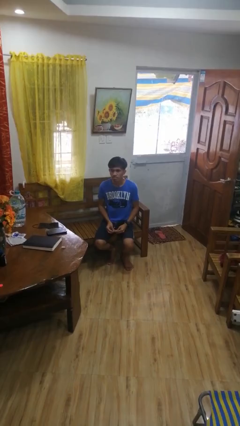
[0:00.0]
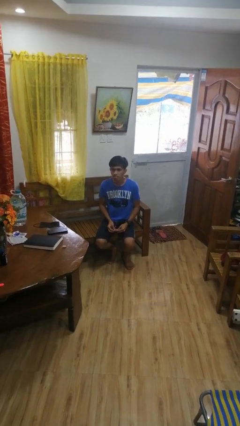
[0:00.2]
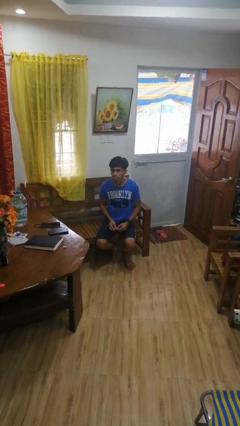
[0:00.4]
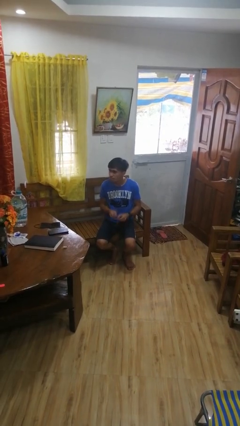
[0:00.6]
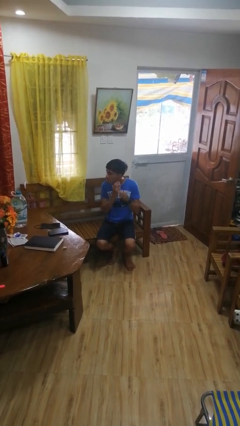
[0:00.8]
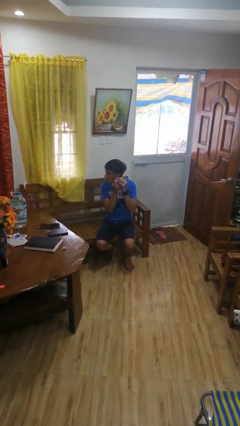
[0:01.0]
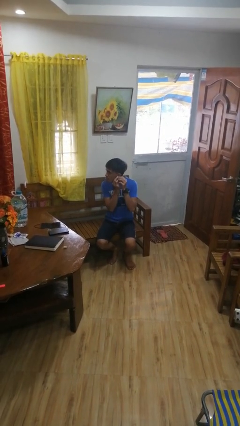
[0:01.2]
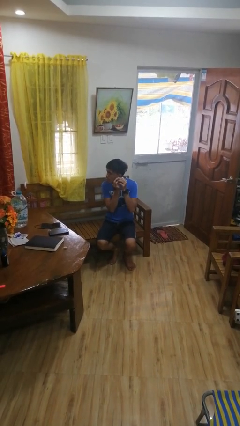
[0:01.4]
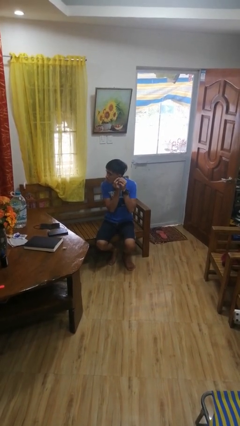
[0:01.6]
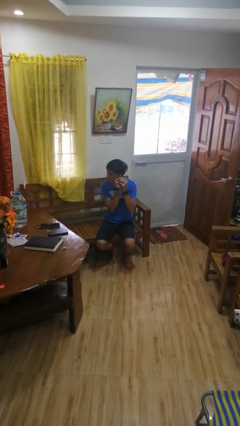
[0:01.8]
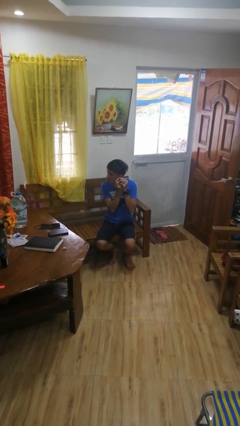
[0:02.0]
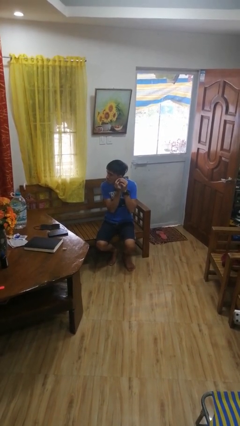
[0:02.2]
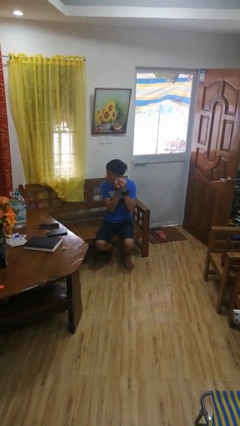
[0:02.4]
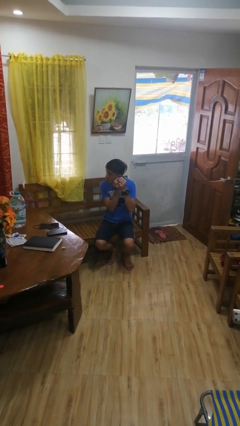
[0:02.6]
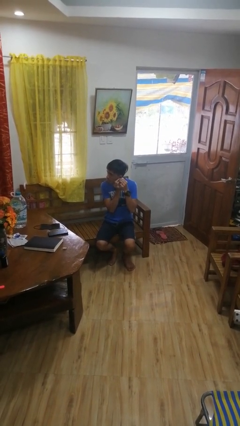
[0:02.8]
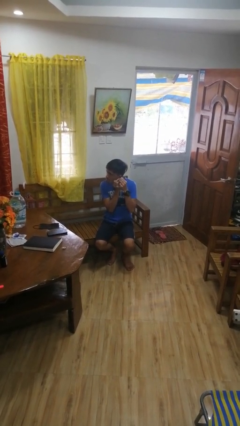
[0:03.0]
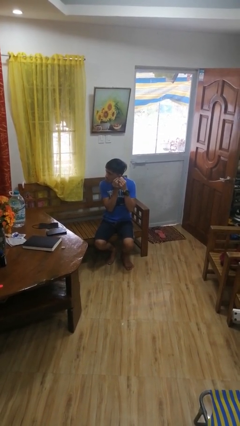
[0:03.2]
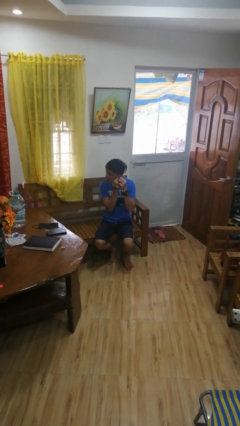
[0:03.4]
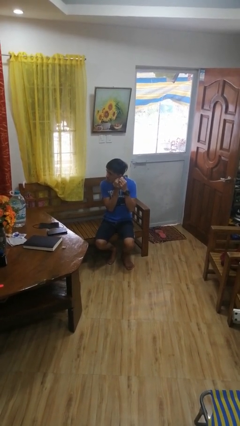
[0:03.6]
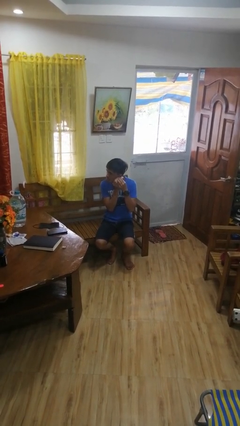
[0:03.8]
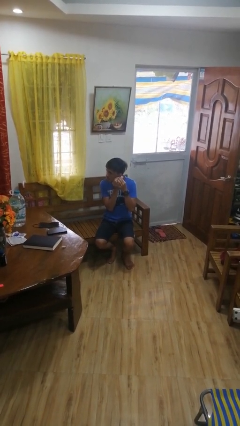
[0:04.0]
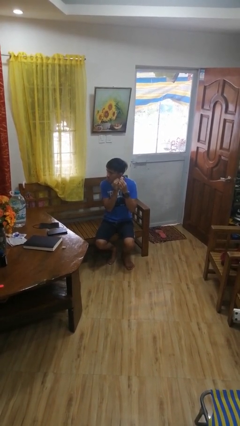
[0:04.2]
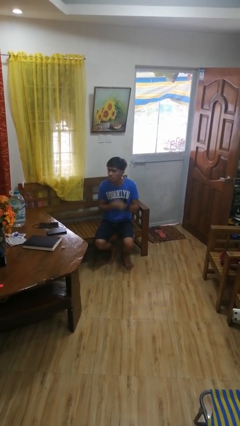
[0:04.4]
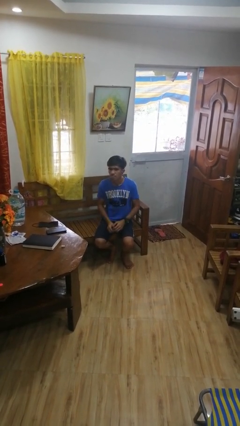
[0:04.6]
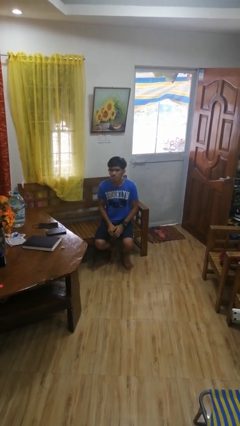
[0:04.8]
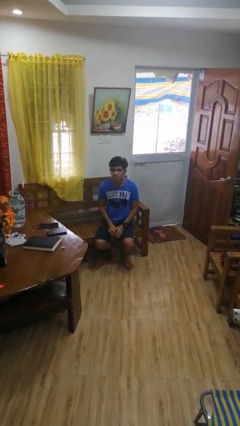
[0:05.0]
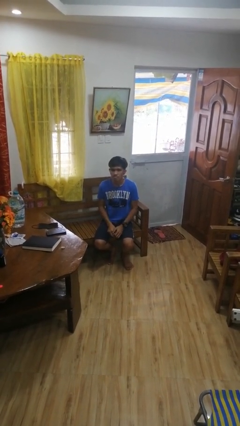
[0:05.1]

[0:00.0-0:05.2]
person puts on earrings

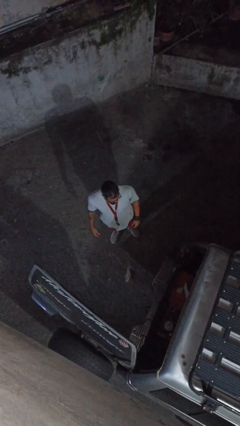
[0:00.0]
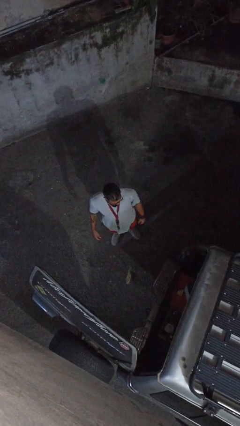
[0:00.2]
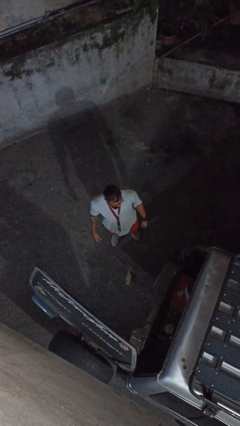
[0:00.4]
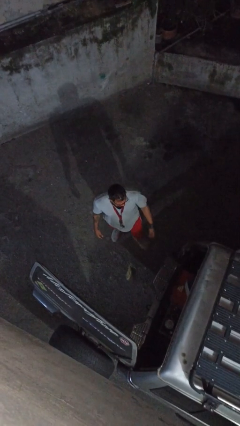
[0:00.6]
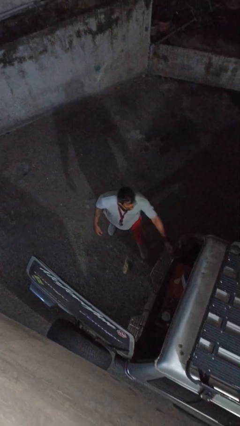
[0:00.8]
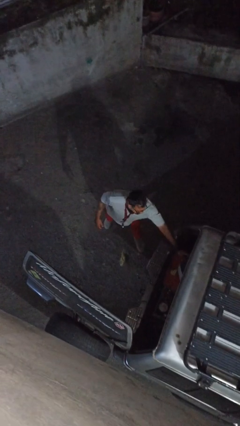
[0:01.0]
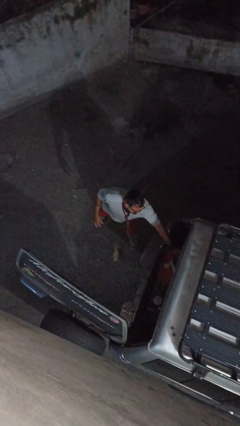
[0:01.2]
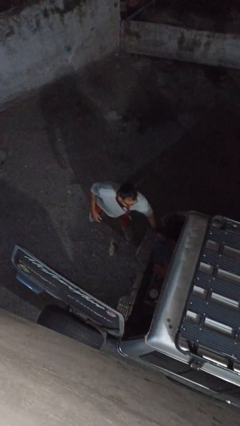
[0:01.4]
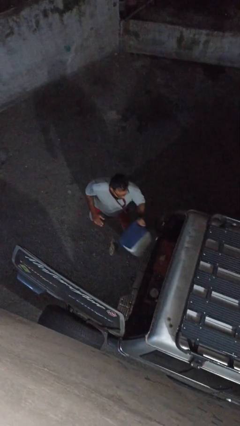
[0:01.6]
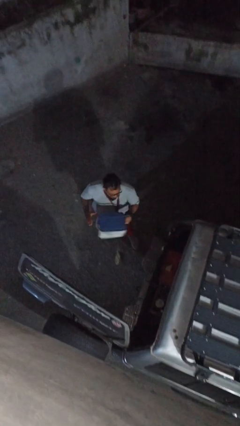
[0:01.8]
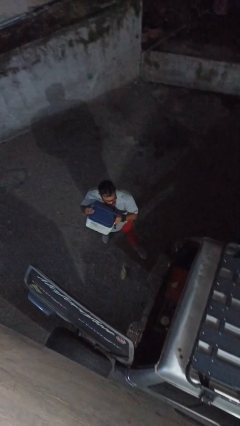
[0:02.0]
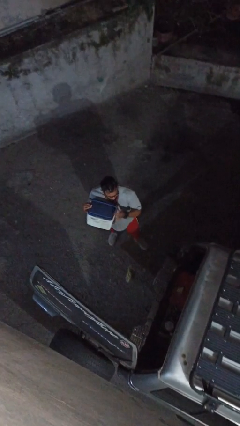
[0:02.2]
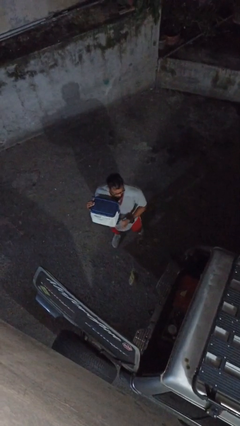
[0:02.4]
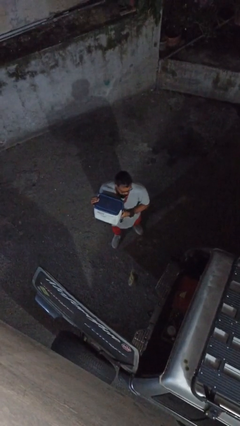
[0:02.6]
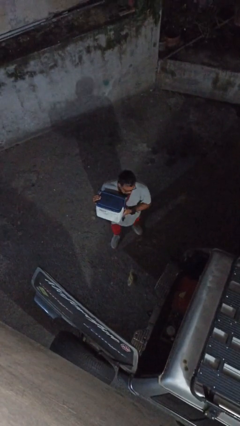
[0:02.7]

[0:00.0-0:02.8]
person unloads car

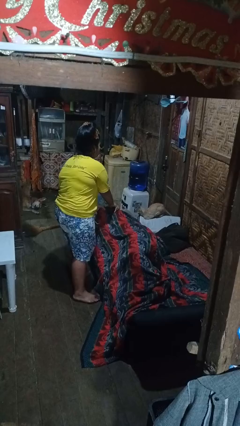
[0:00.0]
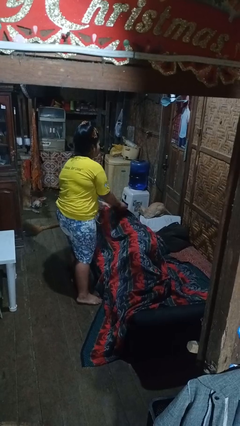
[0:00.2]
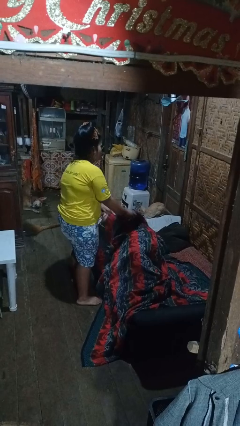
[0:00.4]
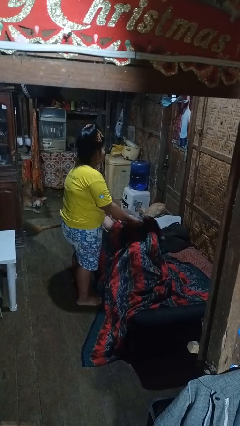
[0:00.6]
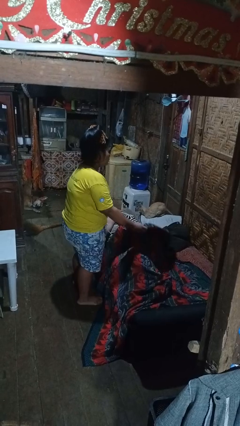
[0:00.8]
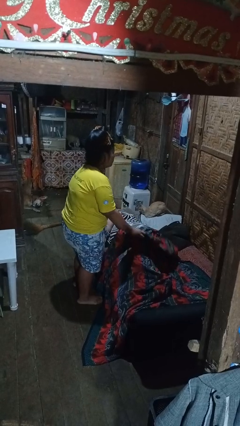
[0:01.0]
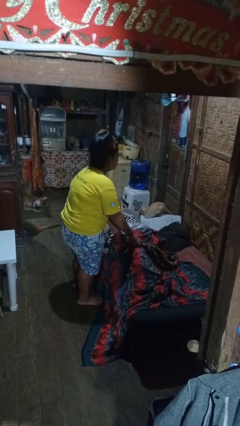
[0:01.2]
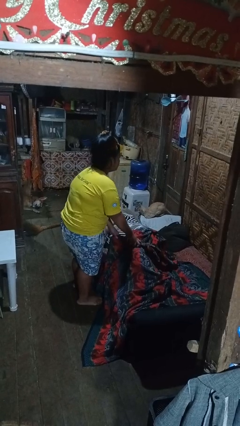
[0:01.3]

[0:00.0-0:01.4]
person uncovers friend with blanket

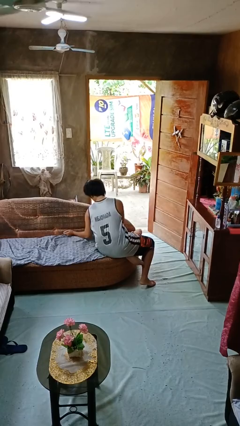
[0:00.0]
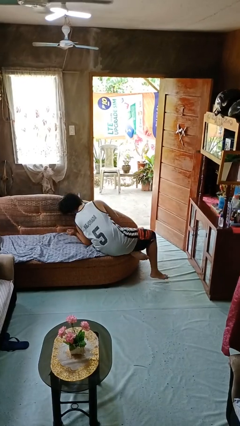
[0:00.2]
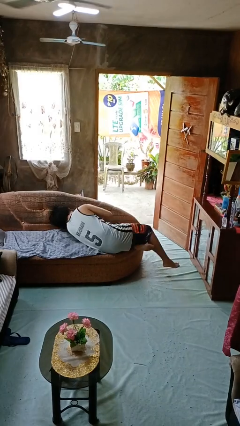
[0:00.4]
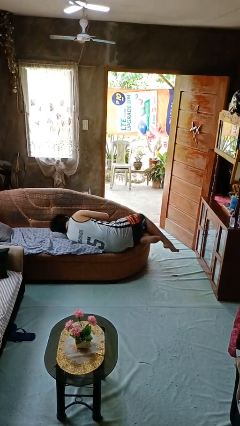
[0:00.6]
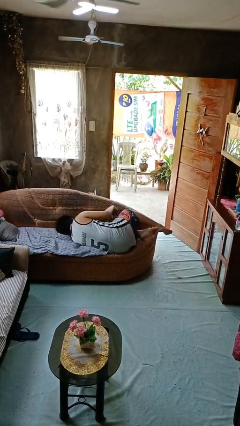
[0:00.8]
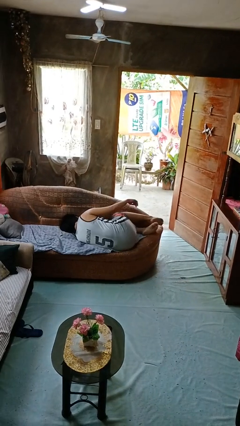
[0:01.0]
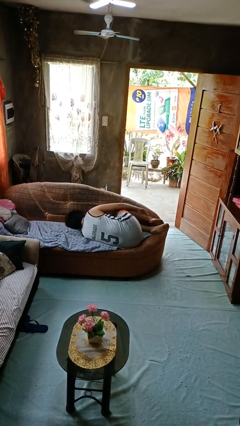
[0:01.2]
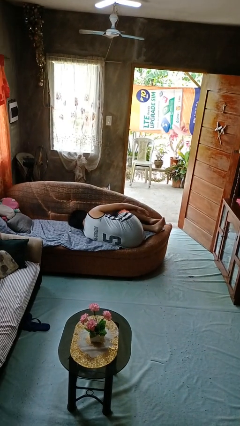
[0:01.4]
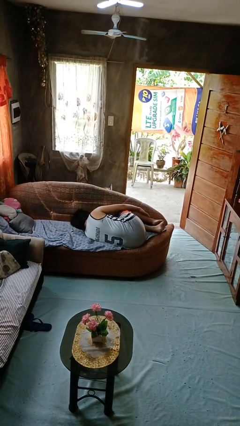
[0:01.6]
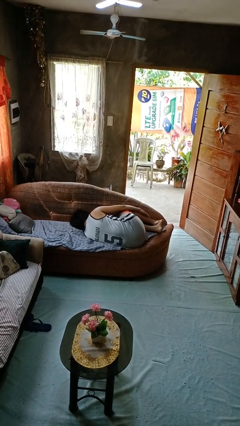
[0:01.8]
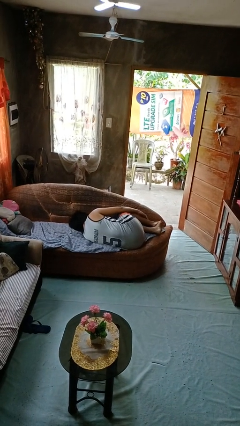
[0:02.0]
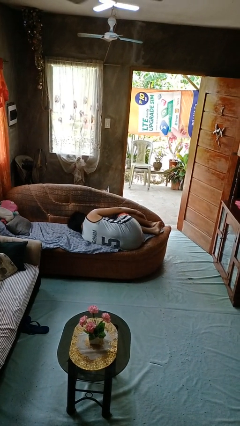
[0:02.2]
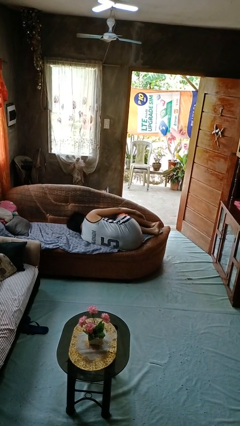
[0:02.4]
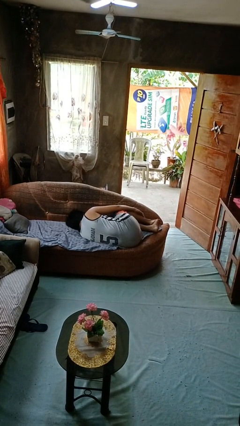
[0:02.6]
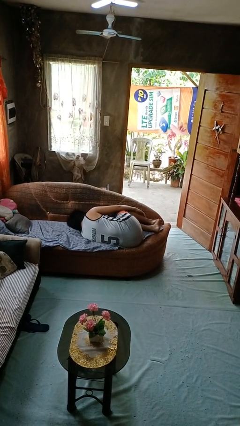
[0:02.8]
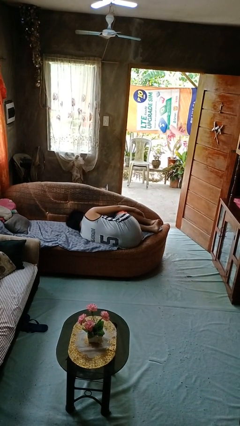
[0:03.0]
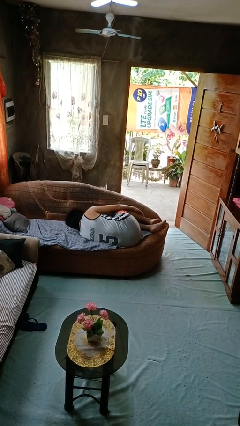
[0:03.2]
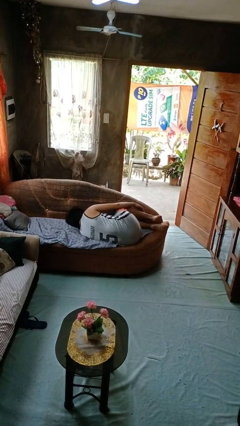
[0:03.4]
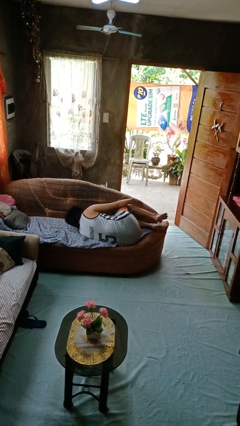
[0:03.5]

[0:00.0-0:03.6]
person lies down on couch

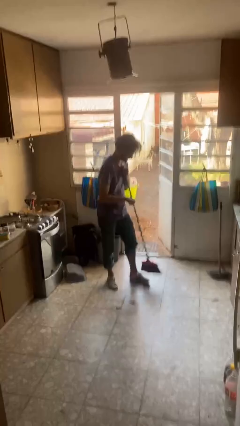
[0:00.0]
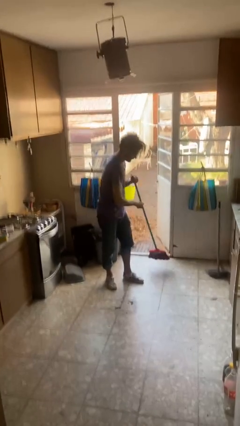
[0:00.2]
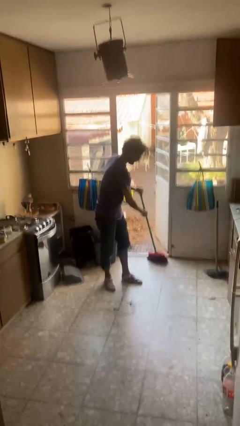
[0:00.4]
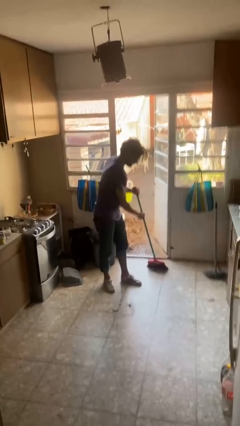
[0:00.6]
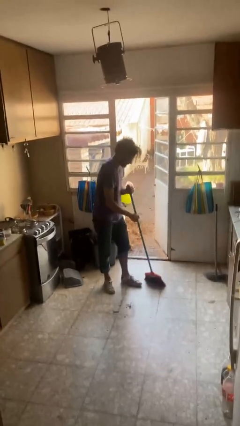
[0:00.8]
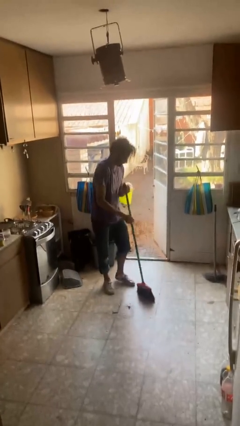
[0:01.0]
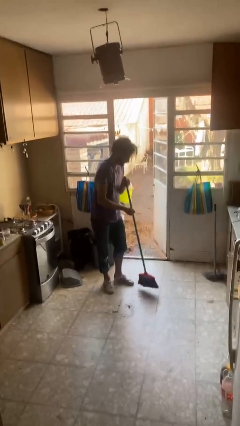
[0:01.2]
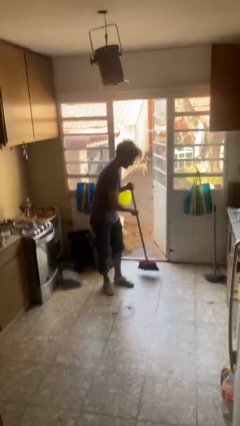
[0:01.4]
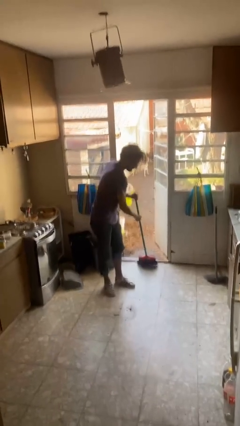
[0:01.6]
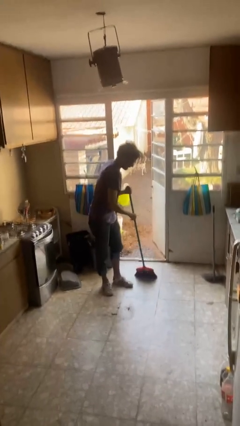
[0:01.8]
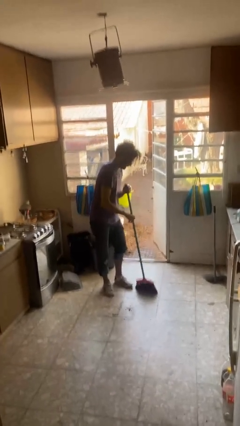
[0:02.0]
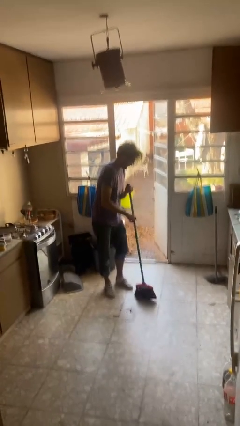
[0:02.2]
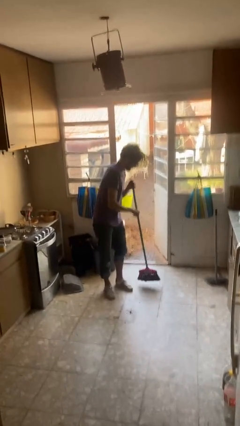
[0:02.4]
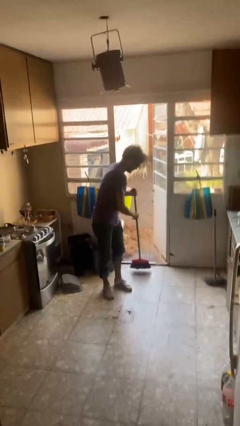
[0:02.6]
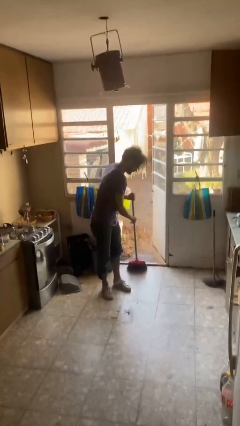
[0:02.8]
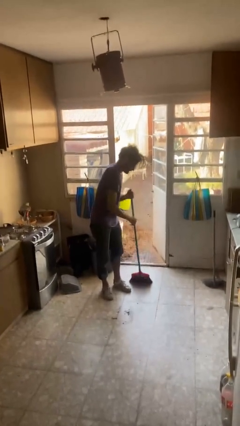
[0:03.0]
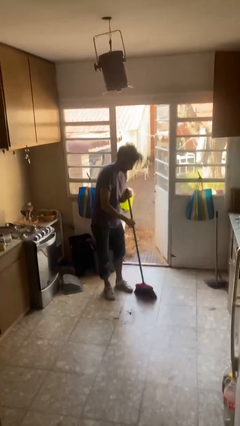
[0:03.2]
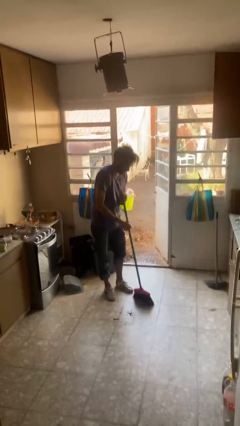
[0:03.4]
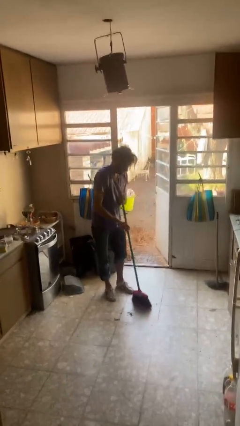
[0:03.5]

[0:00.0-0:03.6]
person sweeps floor

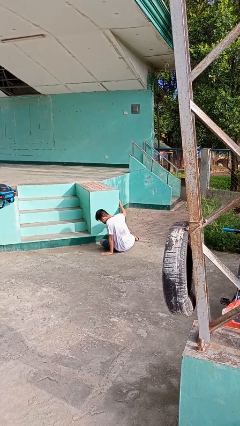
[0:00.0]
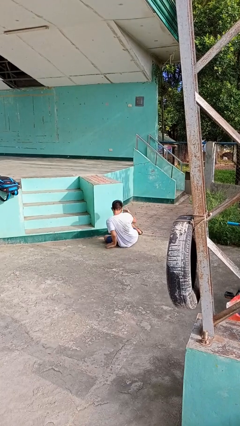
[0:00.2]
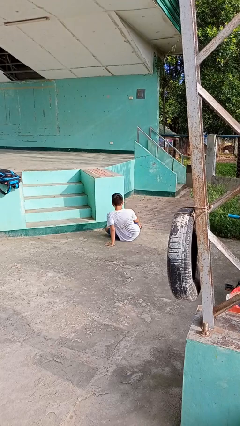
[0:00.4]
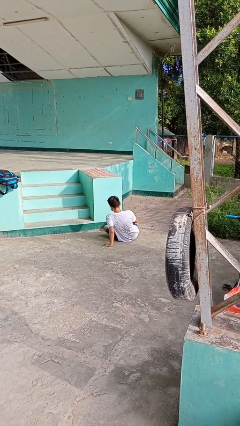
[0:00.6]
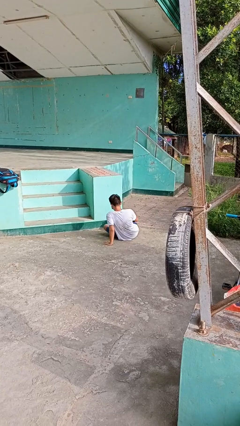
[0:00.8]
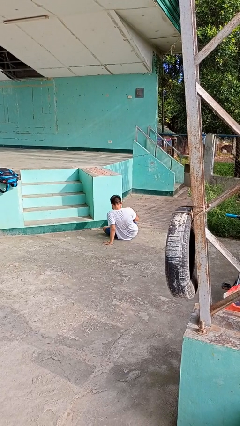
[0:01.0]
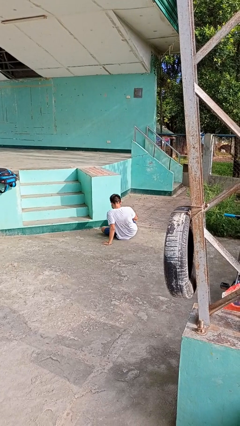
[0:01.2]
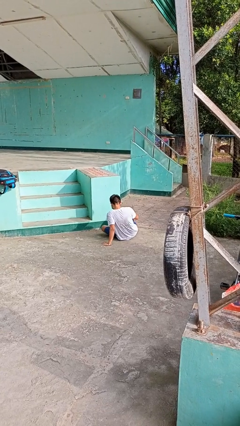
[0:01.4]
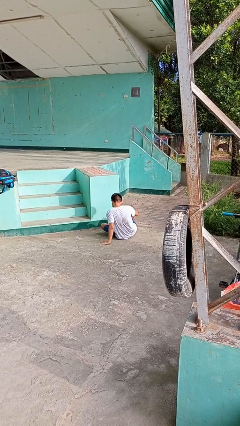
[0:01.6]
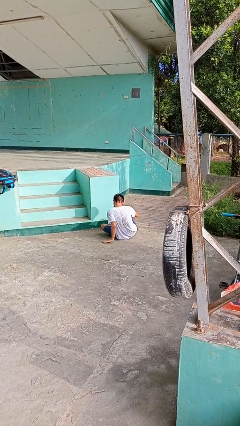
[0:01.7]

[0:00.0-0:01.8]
person lies down on floor
